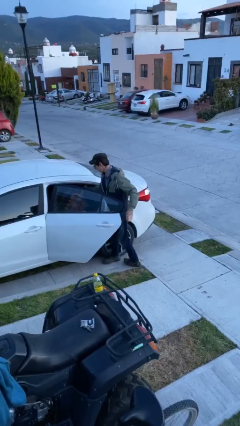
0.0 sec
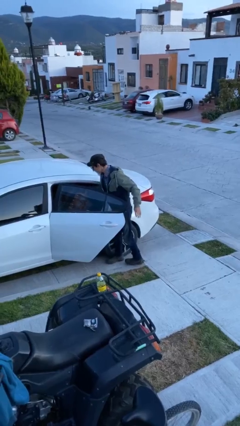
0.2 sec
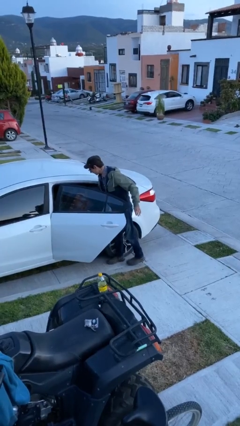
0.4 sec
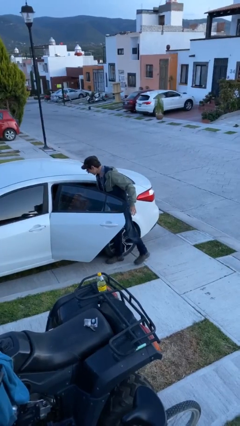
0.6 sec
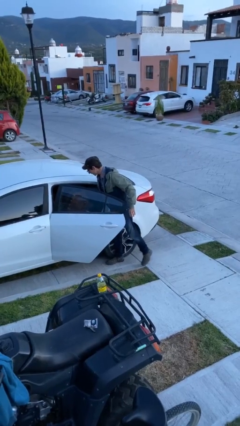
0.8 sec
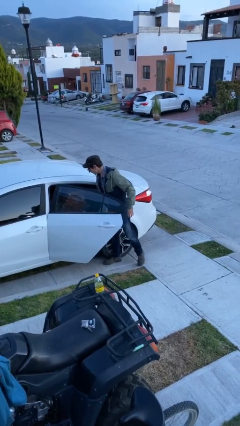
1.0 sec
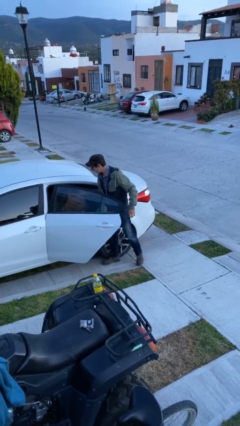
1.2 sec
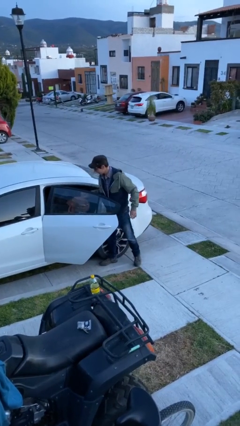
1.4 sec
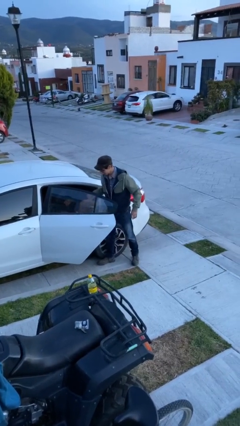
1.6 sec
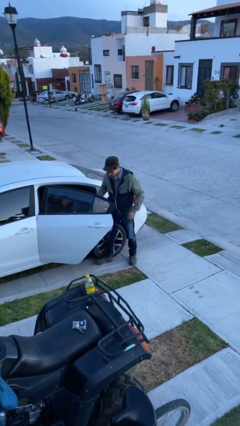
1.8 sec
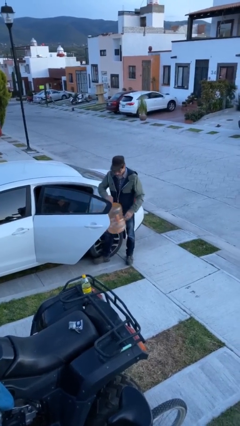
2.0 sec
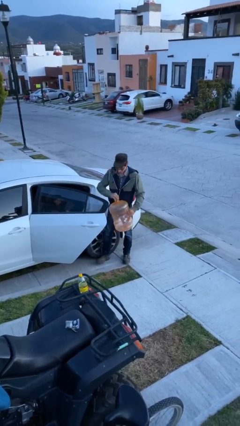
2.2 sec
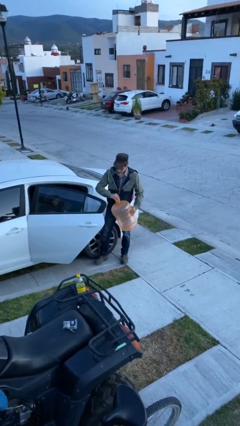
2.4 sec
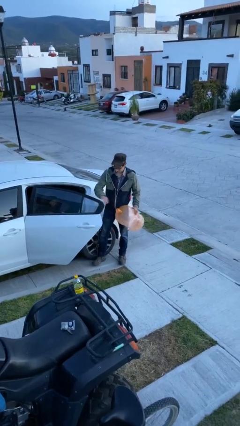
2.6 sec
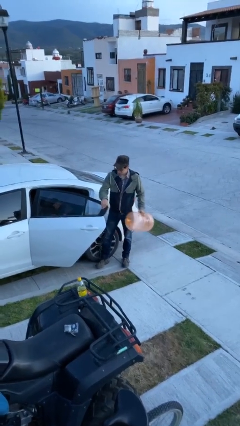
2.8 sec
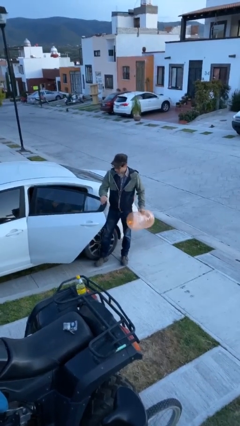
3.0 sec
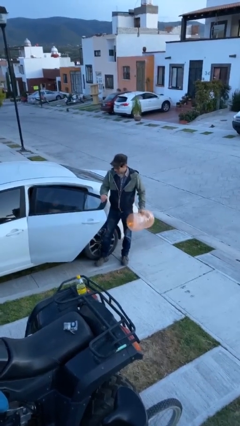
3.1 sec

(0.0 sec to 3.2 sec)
person unloads car

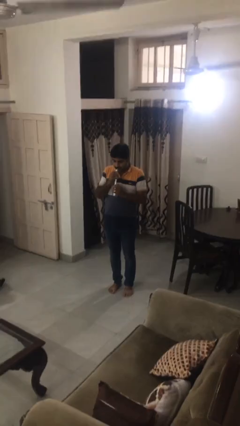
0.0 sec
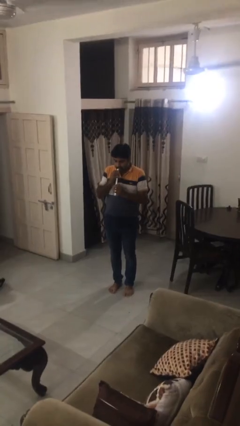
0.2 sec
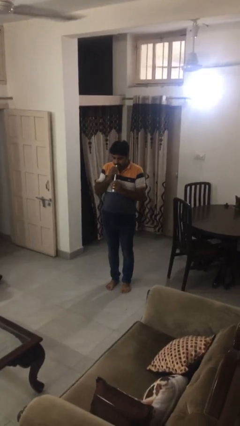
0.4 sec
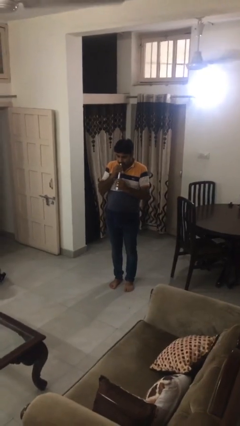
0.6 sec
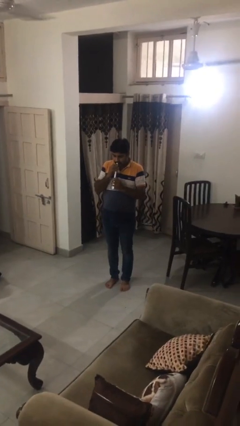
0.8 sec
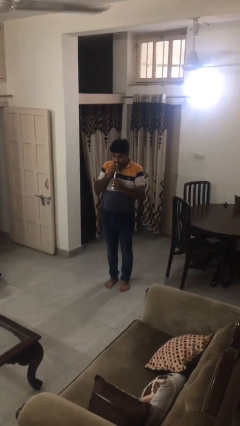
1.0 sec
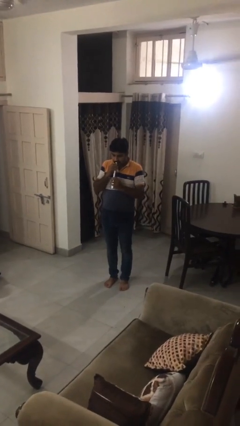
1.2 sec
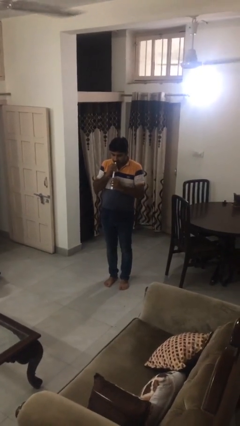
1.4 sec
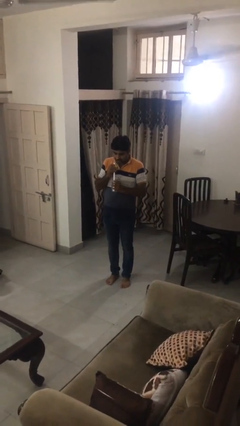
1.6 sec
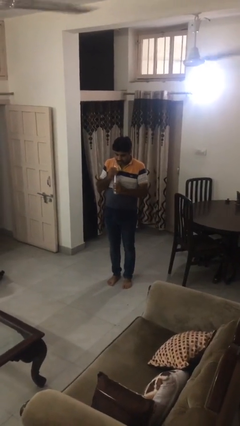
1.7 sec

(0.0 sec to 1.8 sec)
person drinks from straw

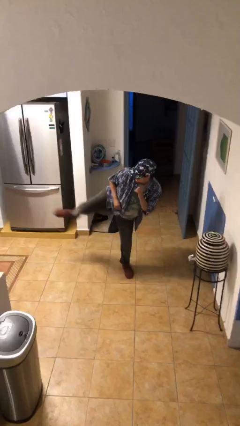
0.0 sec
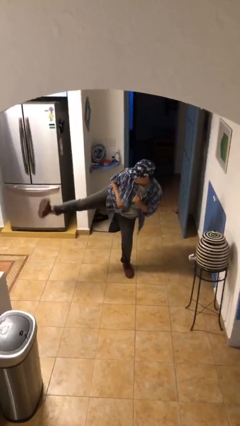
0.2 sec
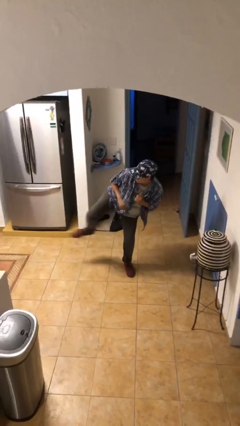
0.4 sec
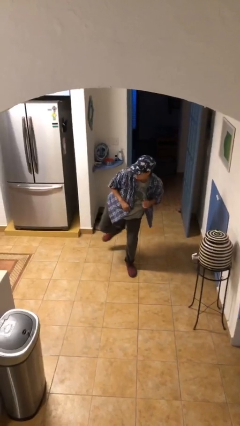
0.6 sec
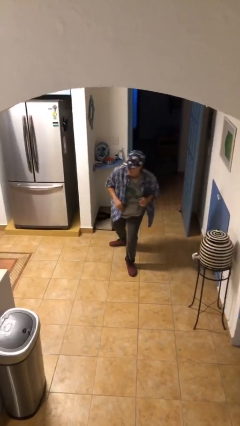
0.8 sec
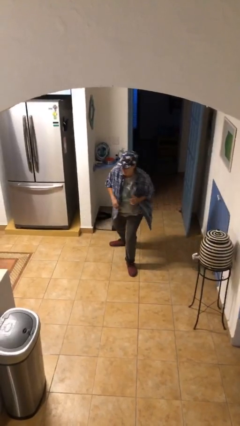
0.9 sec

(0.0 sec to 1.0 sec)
person karate kicks

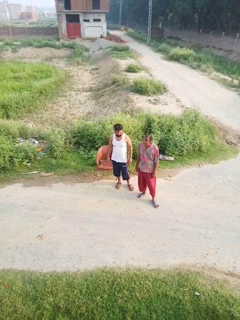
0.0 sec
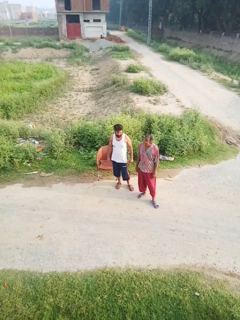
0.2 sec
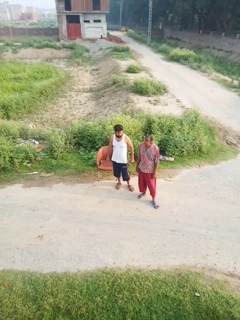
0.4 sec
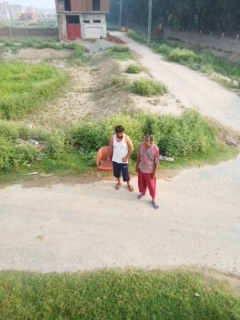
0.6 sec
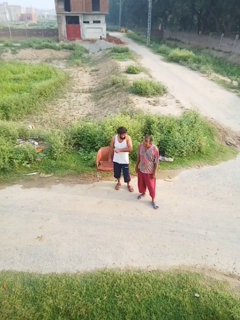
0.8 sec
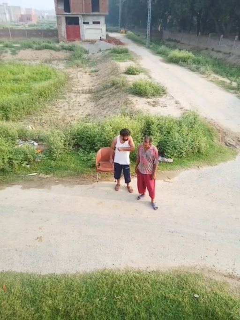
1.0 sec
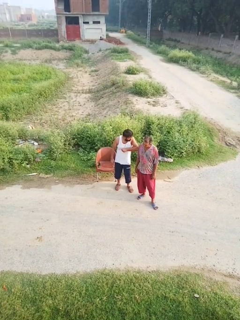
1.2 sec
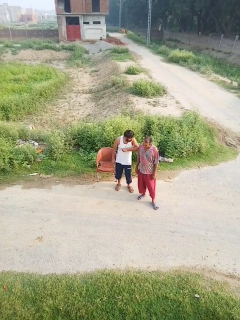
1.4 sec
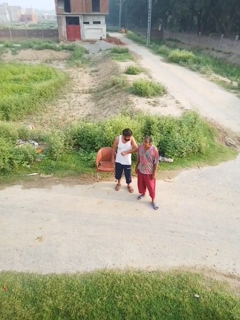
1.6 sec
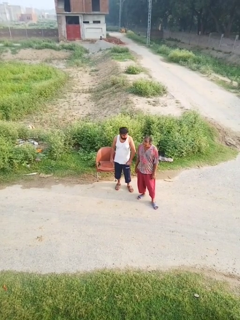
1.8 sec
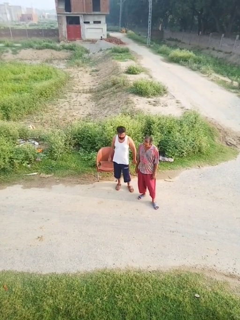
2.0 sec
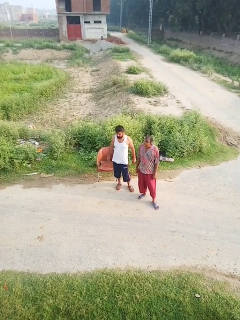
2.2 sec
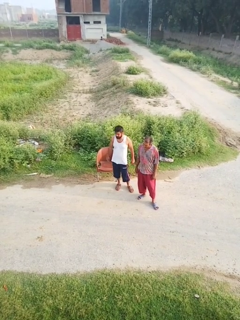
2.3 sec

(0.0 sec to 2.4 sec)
person nudges person with elbow

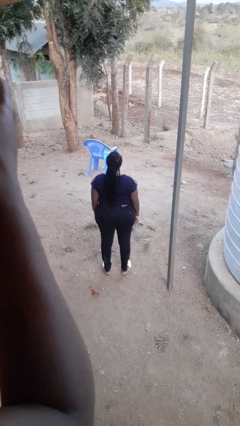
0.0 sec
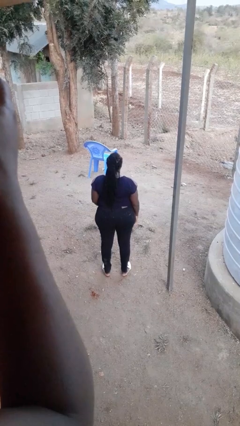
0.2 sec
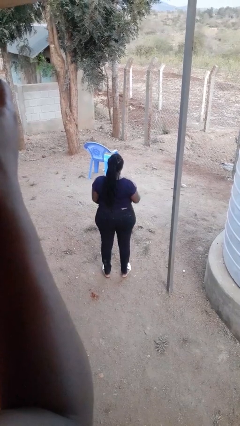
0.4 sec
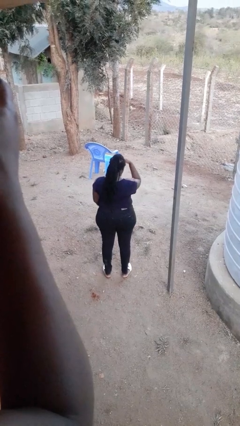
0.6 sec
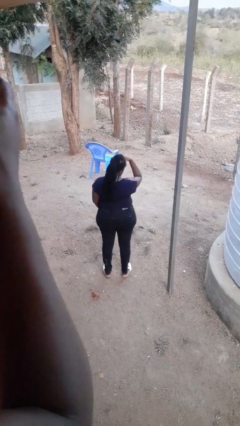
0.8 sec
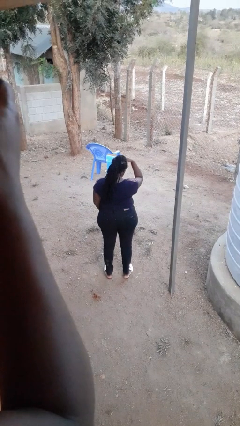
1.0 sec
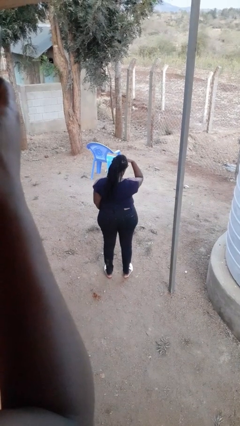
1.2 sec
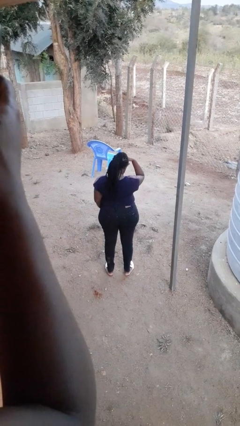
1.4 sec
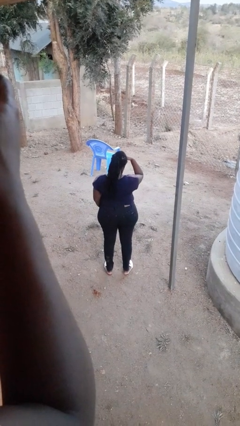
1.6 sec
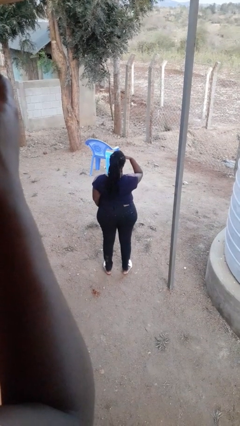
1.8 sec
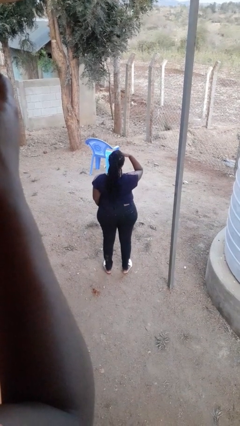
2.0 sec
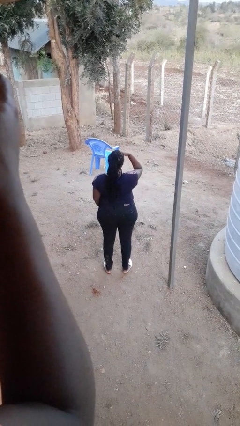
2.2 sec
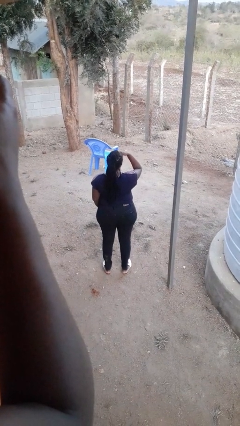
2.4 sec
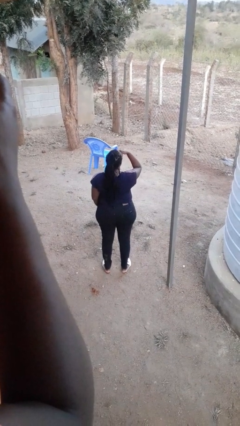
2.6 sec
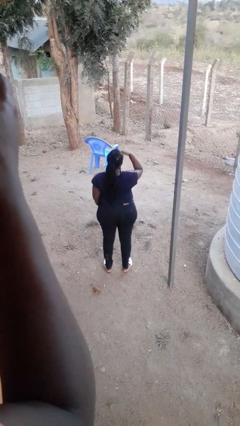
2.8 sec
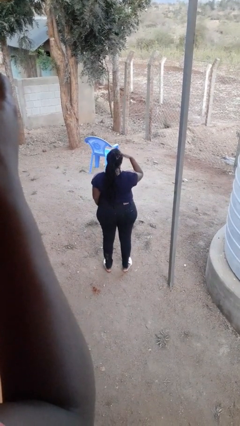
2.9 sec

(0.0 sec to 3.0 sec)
person shades eyes

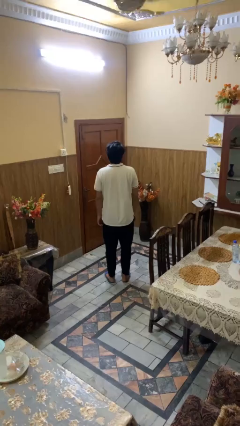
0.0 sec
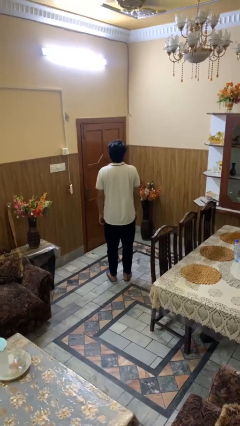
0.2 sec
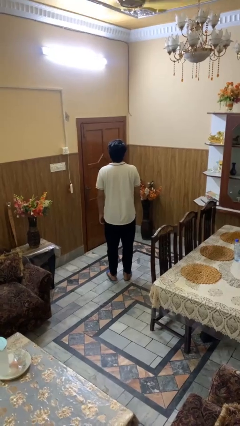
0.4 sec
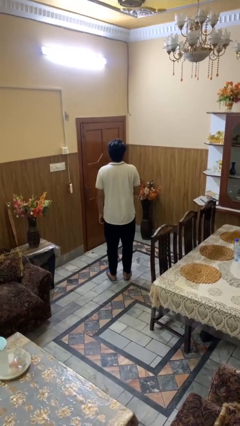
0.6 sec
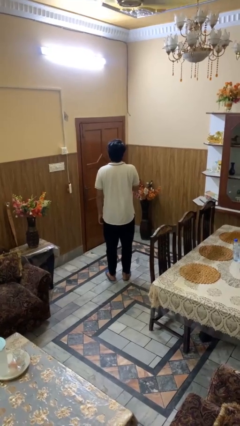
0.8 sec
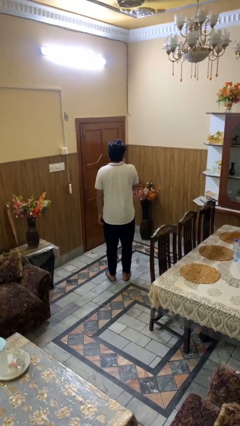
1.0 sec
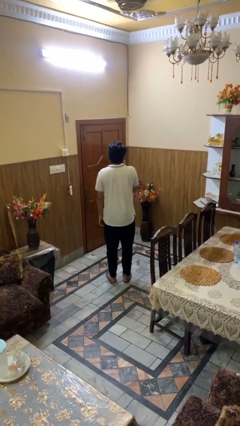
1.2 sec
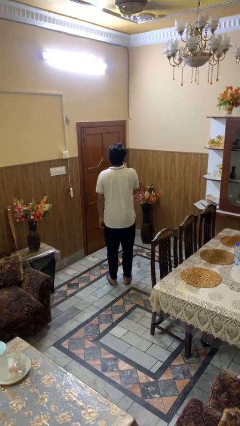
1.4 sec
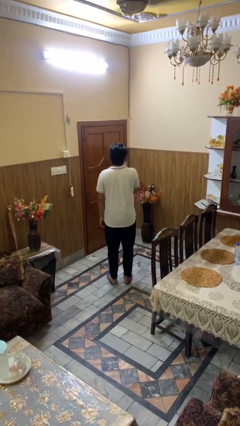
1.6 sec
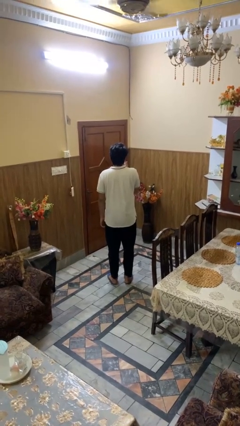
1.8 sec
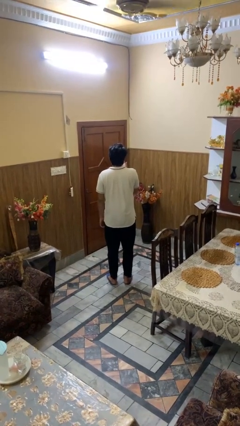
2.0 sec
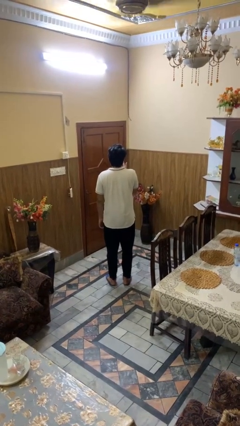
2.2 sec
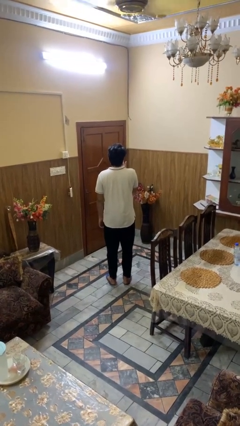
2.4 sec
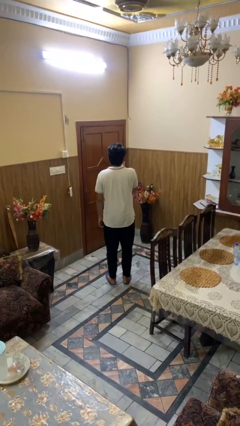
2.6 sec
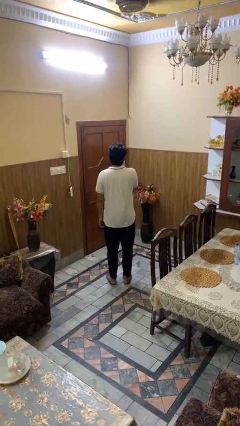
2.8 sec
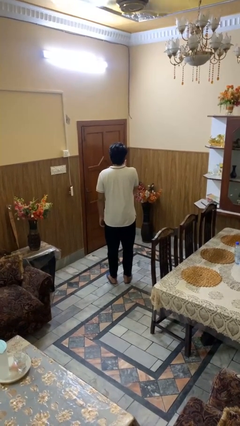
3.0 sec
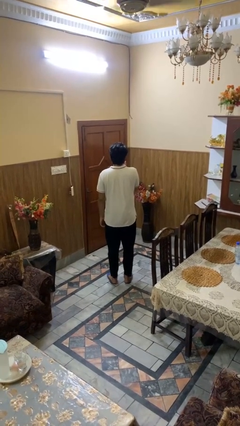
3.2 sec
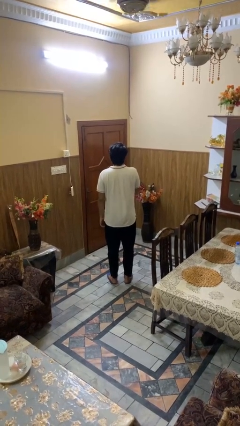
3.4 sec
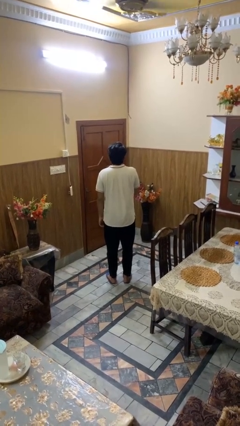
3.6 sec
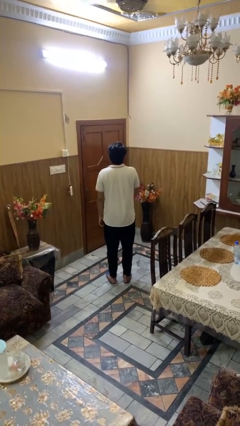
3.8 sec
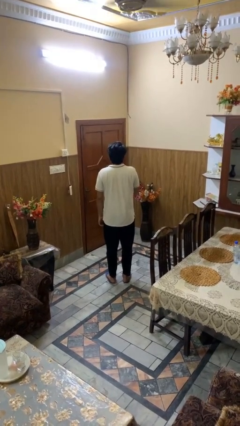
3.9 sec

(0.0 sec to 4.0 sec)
person licks fingers

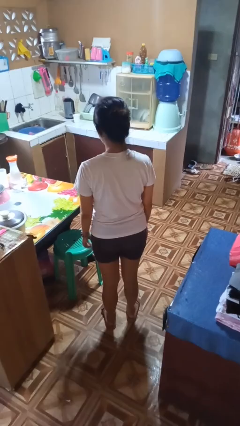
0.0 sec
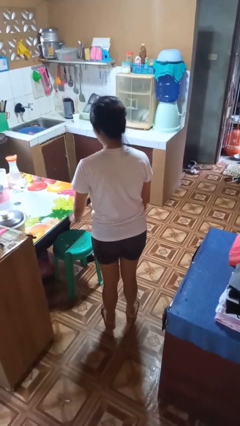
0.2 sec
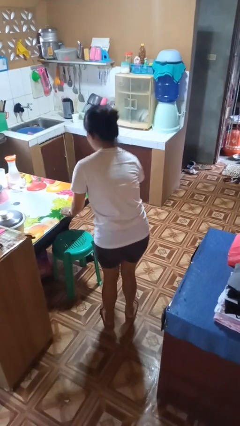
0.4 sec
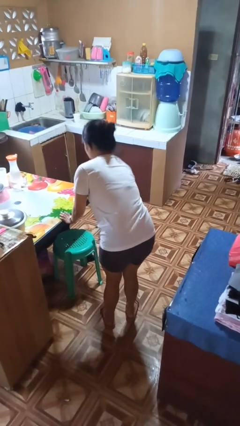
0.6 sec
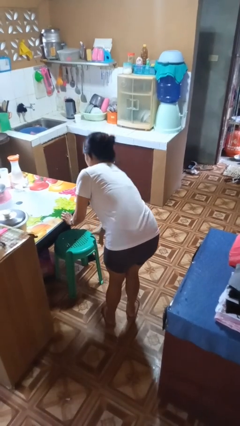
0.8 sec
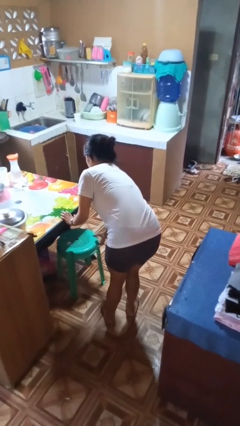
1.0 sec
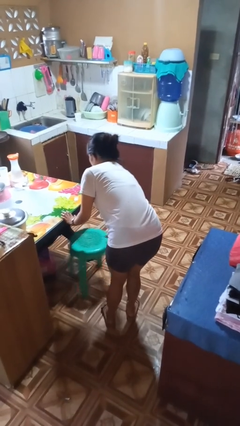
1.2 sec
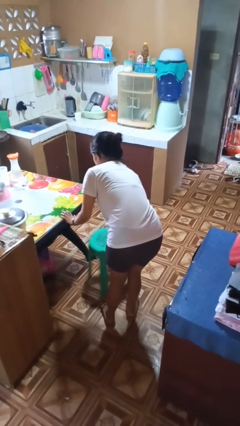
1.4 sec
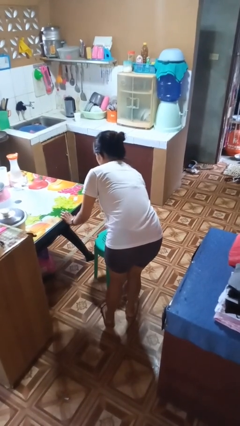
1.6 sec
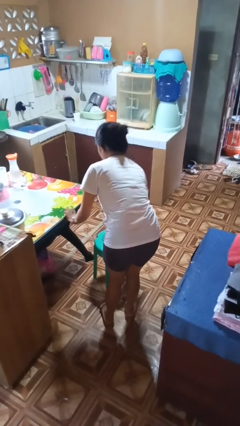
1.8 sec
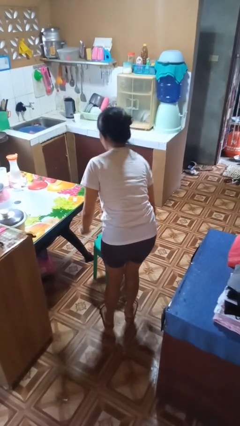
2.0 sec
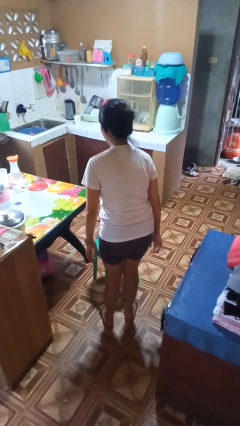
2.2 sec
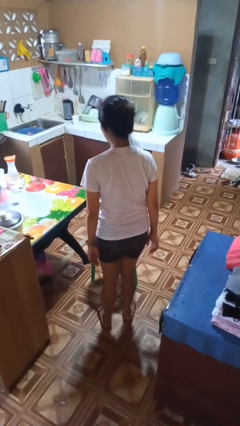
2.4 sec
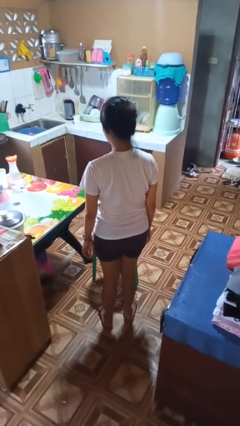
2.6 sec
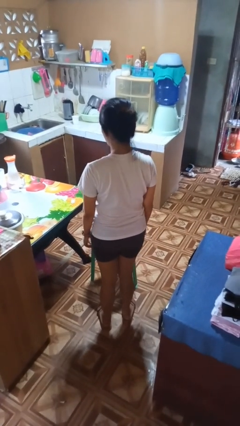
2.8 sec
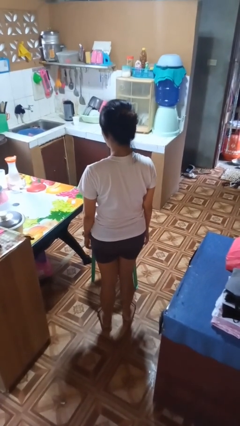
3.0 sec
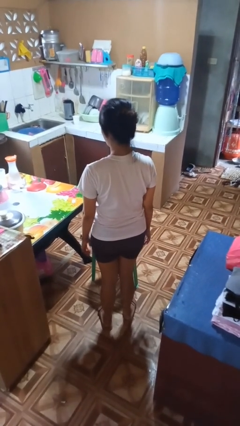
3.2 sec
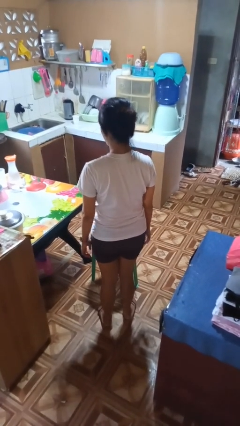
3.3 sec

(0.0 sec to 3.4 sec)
person pulls out chair
